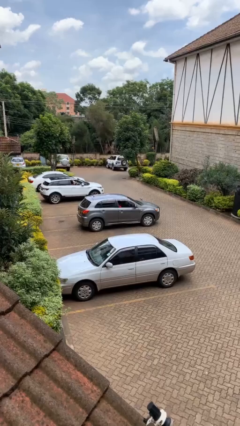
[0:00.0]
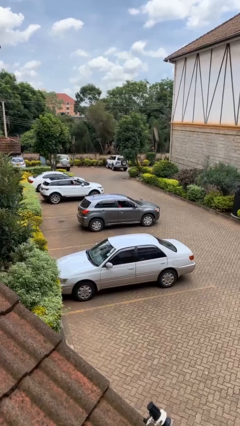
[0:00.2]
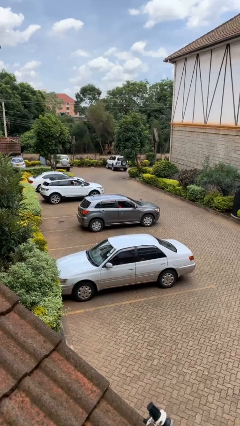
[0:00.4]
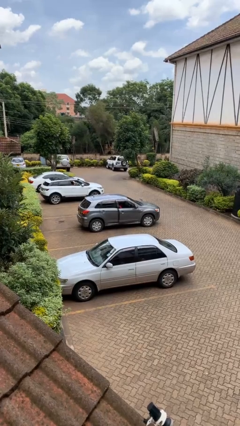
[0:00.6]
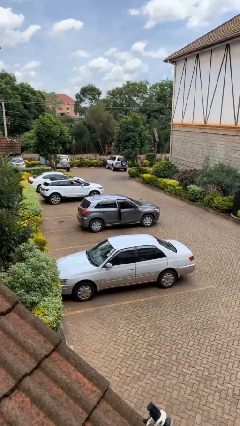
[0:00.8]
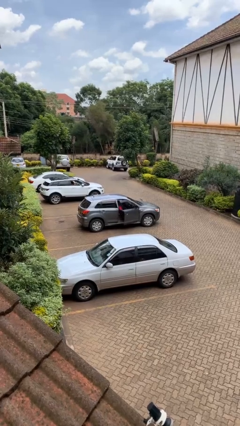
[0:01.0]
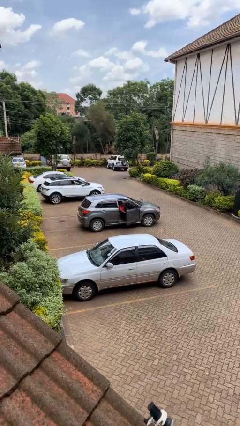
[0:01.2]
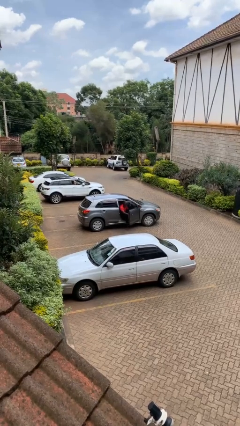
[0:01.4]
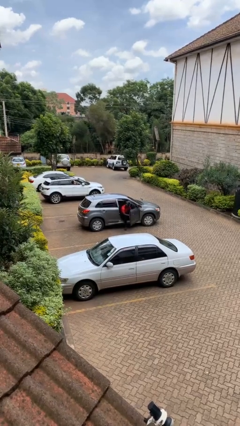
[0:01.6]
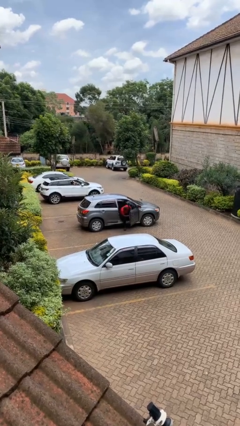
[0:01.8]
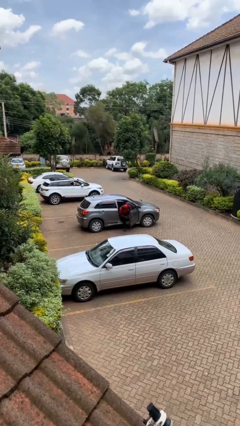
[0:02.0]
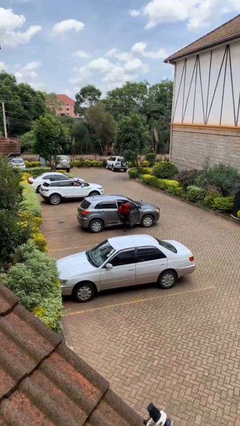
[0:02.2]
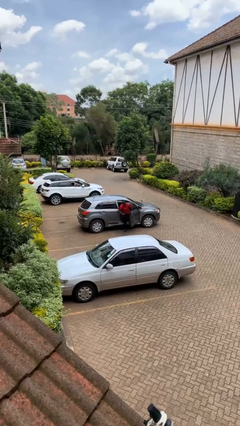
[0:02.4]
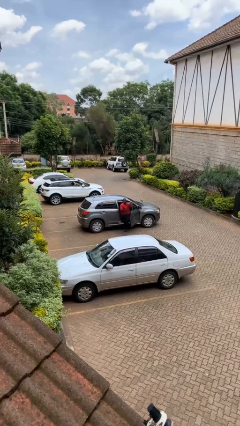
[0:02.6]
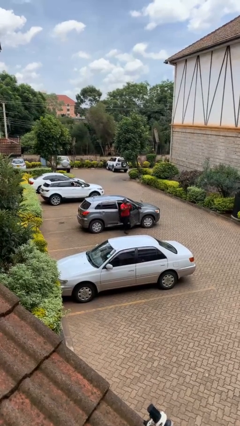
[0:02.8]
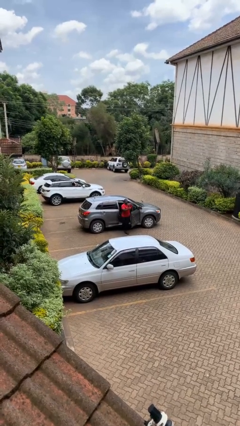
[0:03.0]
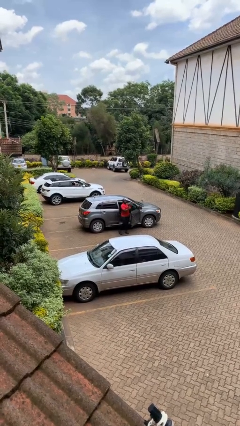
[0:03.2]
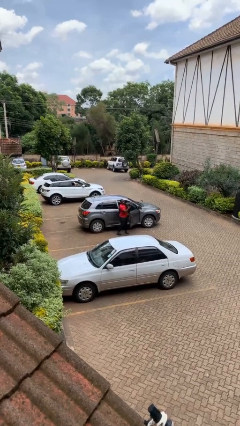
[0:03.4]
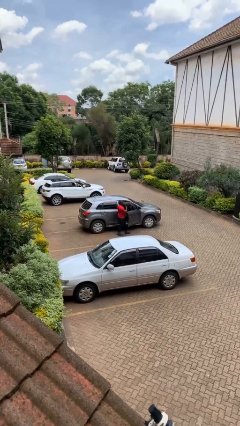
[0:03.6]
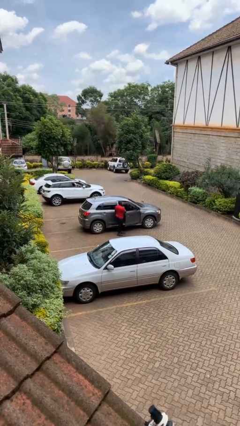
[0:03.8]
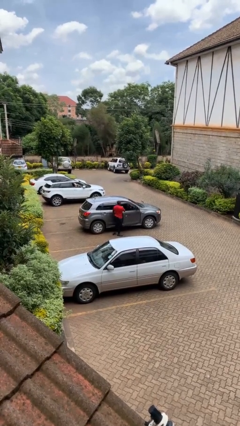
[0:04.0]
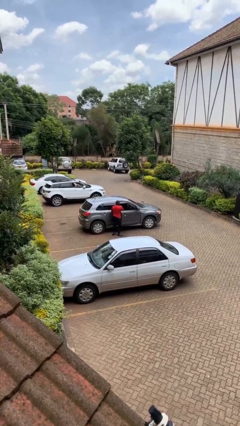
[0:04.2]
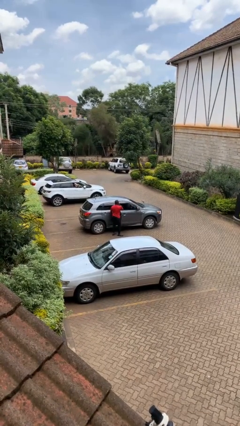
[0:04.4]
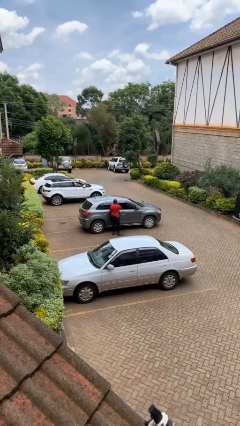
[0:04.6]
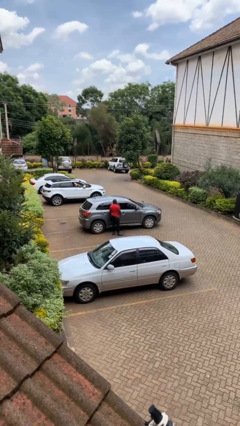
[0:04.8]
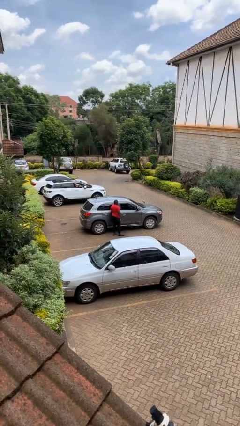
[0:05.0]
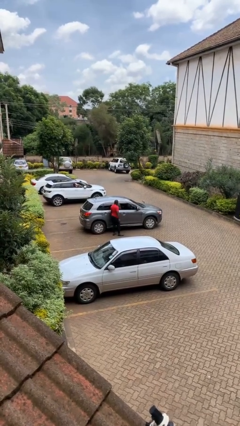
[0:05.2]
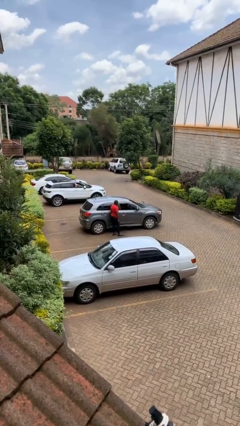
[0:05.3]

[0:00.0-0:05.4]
car drops off person

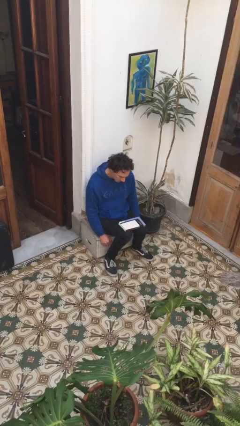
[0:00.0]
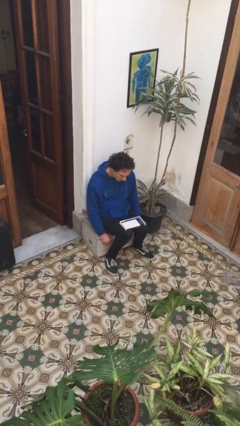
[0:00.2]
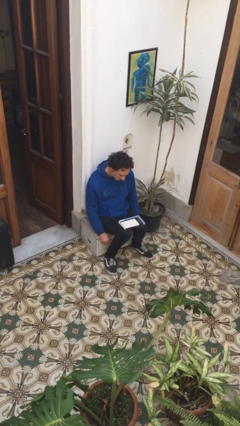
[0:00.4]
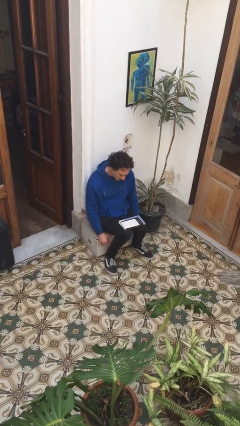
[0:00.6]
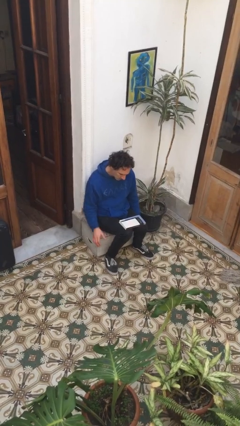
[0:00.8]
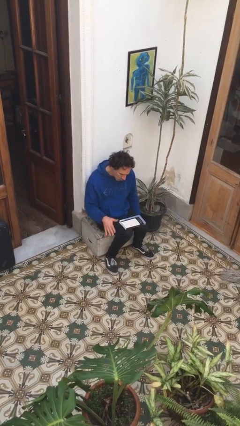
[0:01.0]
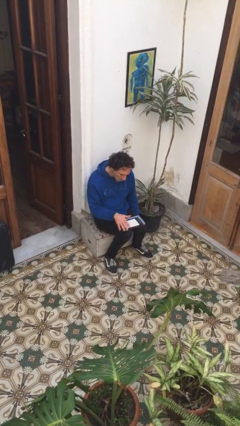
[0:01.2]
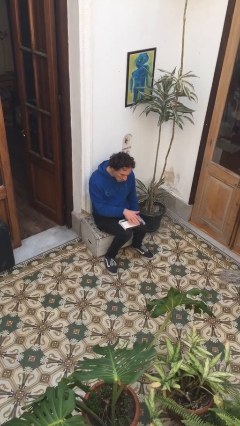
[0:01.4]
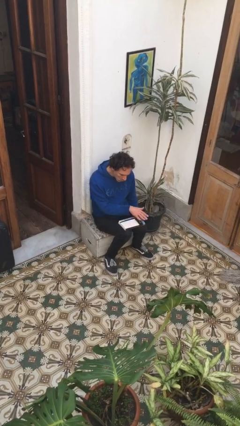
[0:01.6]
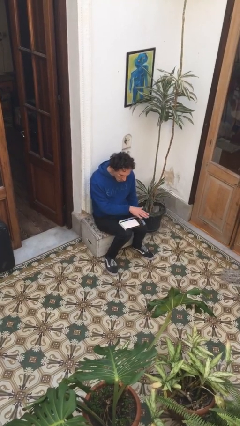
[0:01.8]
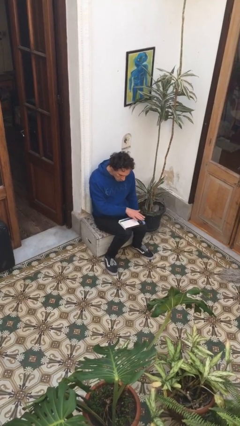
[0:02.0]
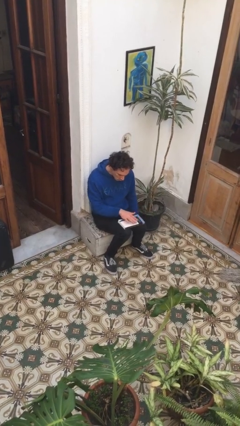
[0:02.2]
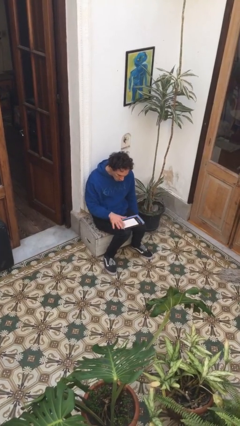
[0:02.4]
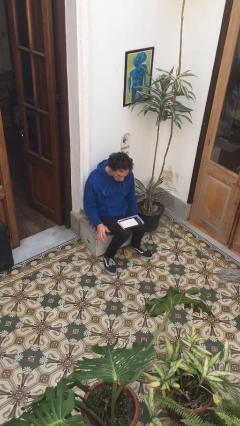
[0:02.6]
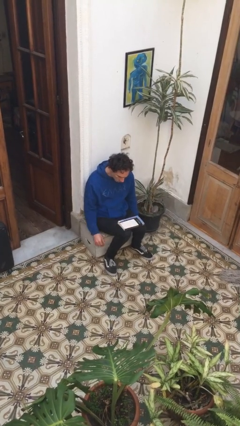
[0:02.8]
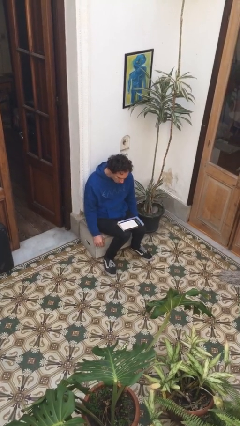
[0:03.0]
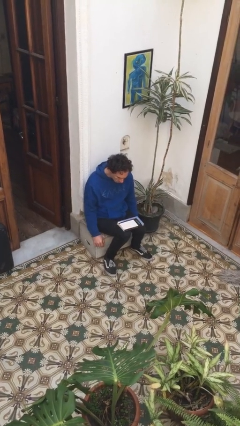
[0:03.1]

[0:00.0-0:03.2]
person waves hand over object

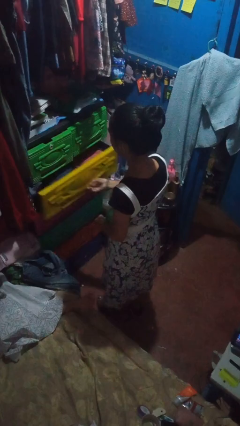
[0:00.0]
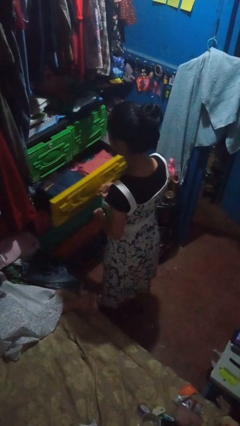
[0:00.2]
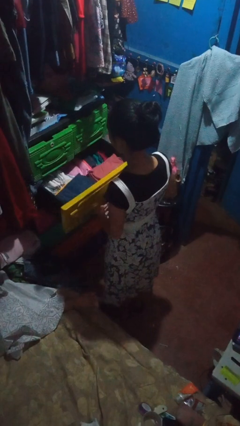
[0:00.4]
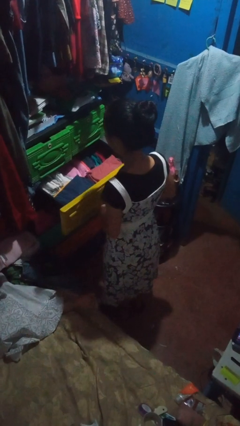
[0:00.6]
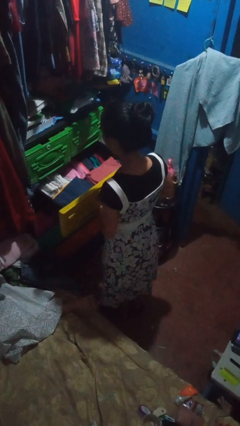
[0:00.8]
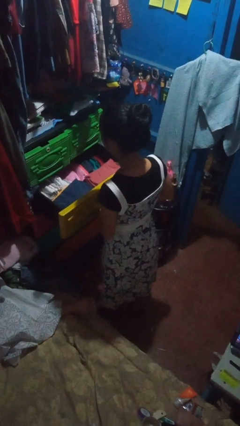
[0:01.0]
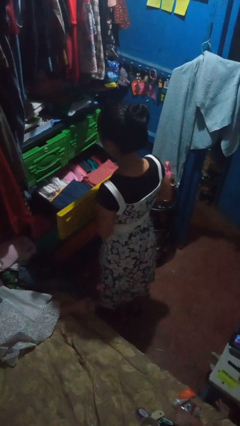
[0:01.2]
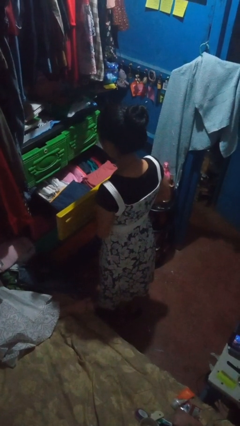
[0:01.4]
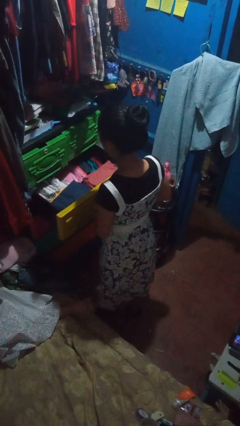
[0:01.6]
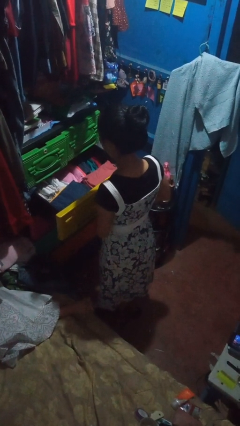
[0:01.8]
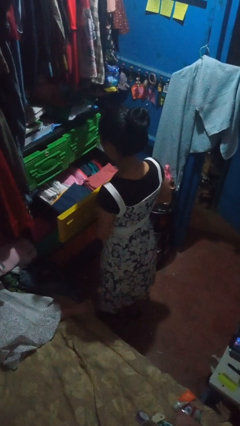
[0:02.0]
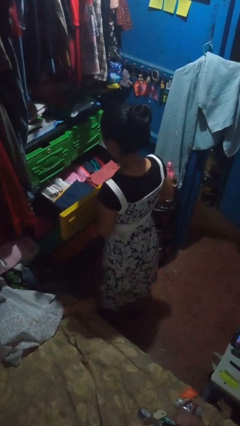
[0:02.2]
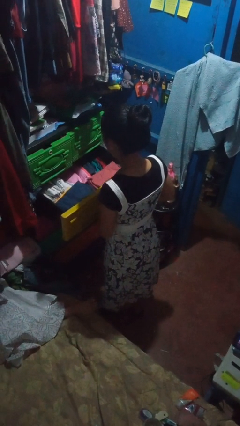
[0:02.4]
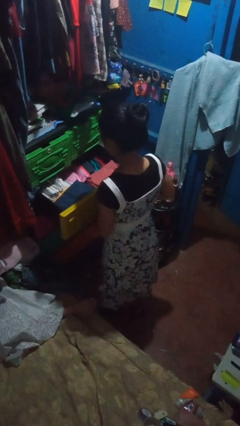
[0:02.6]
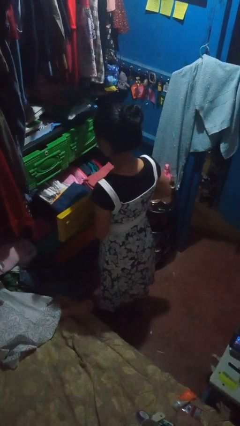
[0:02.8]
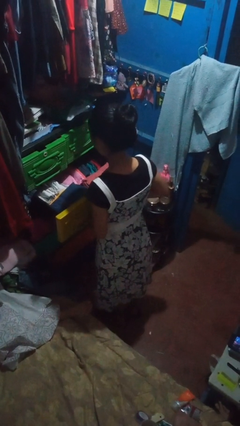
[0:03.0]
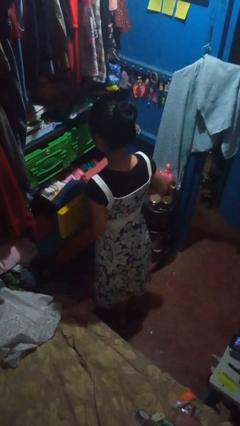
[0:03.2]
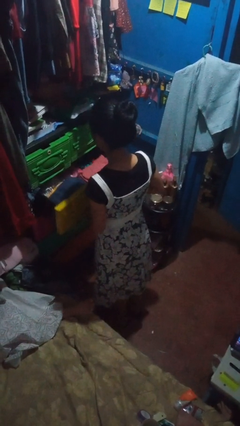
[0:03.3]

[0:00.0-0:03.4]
person opens dresser drawer

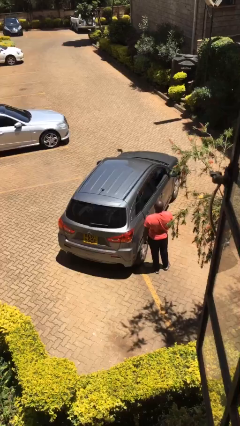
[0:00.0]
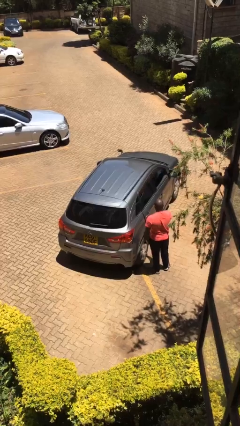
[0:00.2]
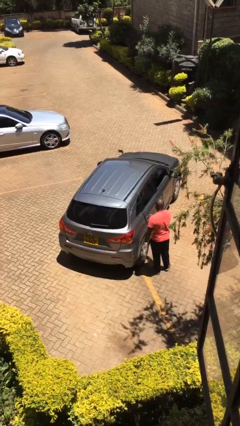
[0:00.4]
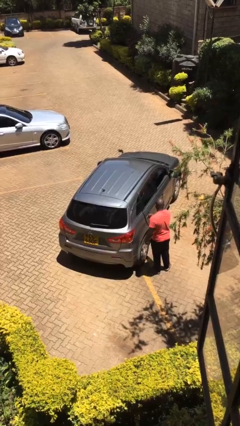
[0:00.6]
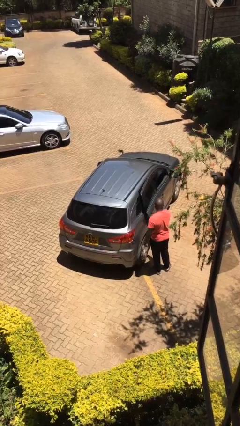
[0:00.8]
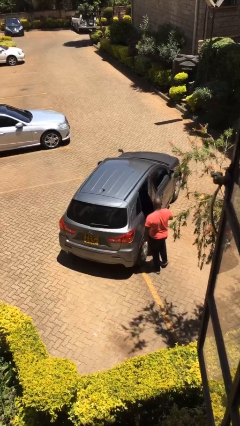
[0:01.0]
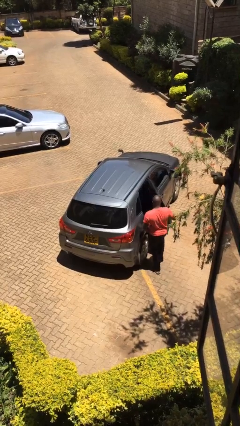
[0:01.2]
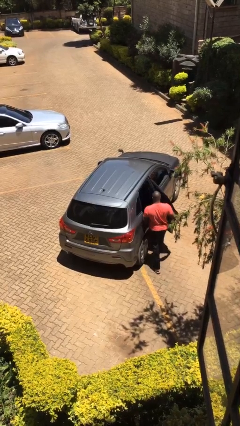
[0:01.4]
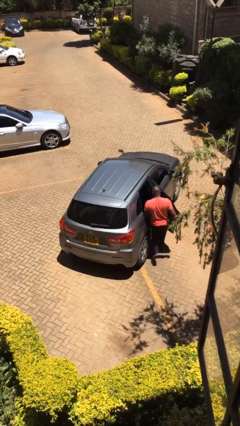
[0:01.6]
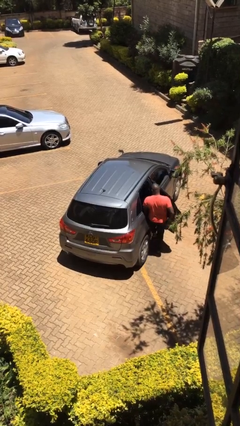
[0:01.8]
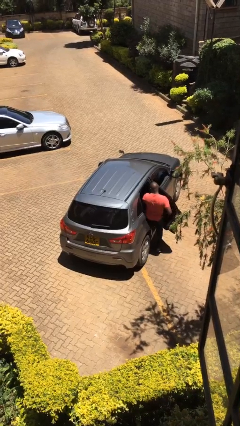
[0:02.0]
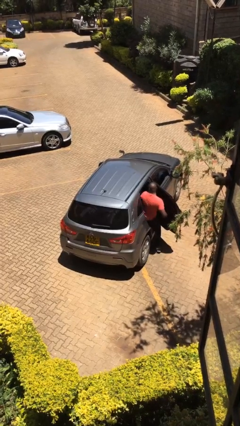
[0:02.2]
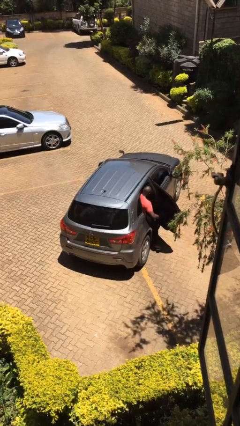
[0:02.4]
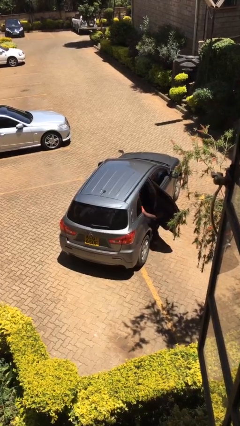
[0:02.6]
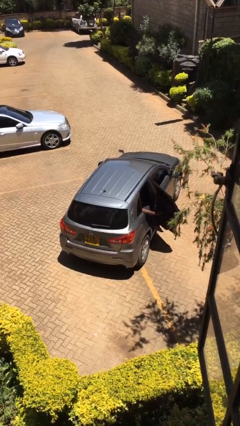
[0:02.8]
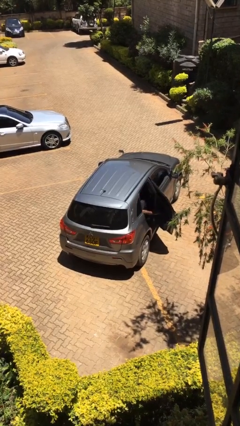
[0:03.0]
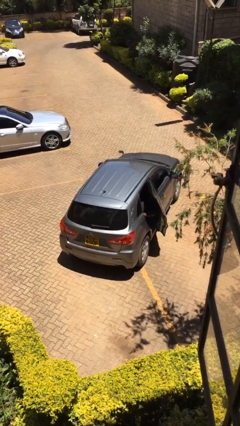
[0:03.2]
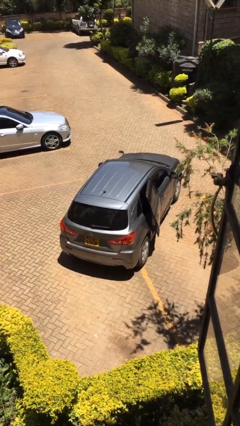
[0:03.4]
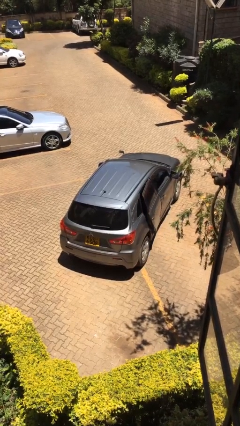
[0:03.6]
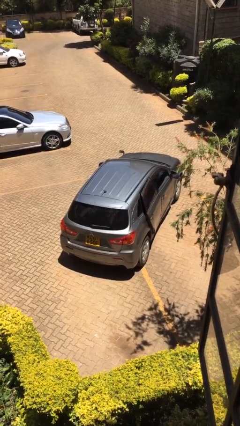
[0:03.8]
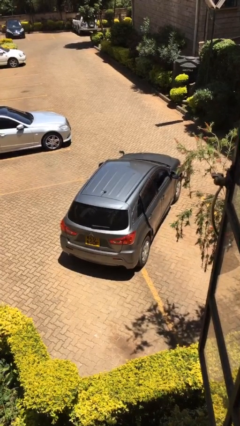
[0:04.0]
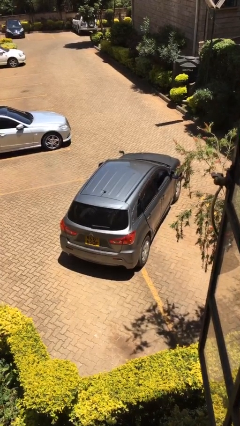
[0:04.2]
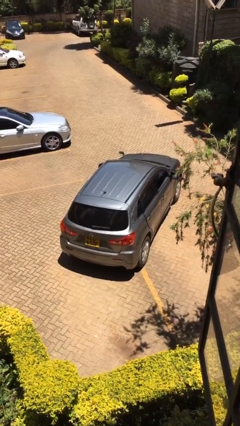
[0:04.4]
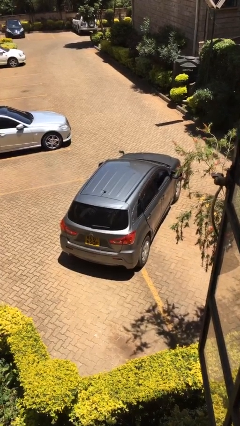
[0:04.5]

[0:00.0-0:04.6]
car picks up person

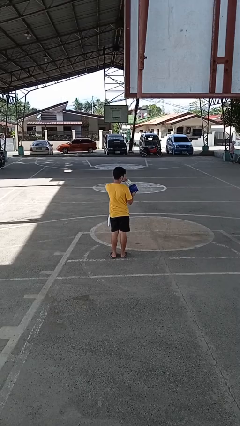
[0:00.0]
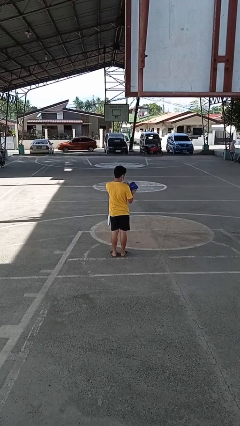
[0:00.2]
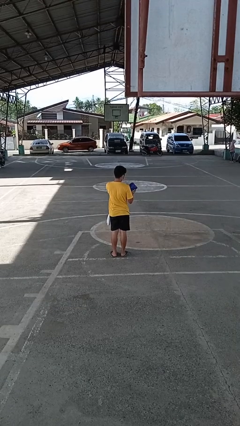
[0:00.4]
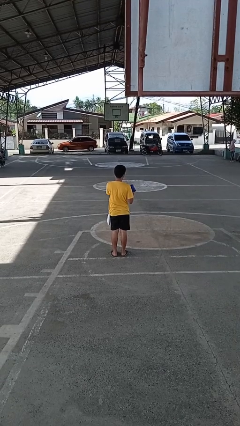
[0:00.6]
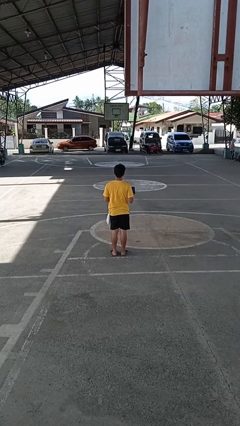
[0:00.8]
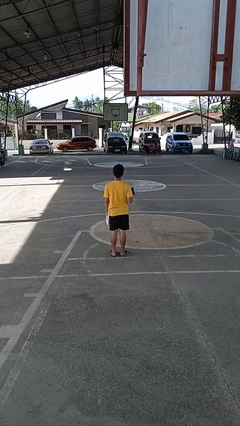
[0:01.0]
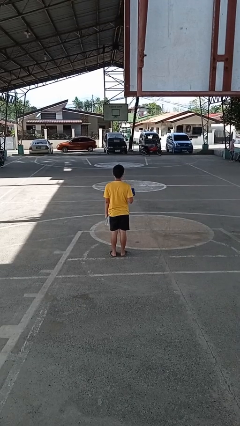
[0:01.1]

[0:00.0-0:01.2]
person puts object into purse
